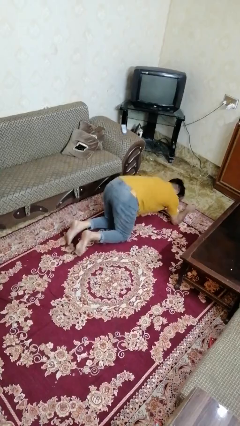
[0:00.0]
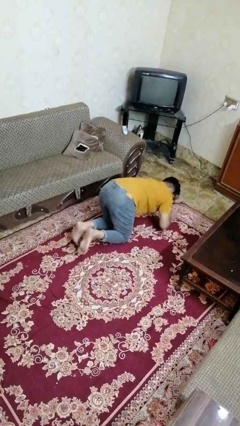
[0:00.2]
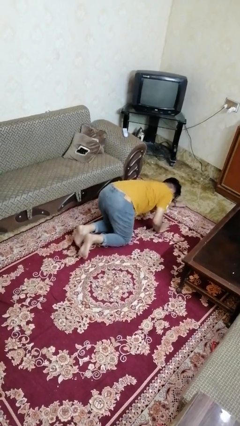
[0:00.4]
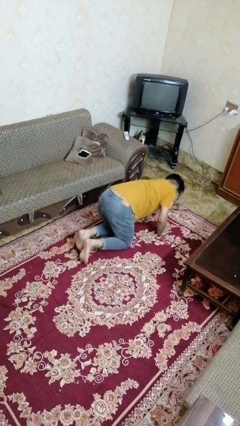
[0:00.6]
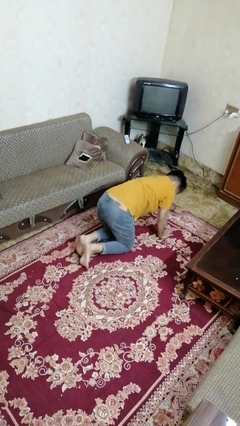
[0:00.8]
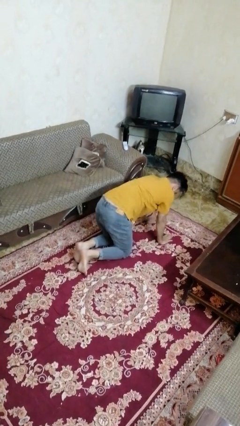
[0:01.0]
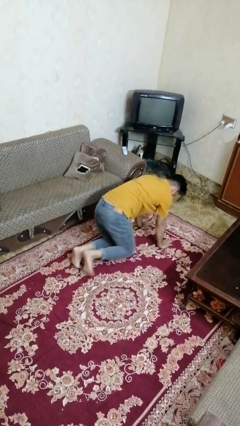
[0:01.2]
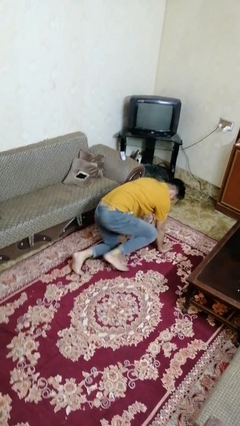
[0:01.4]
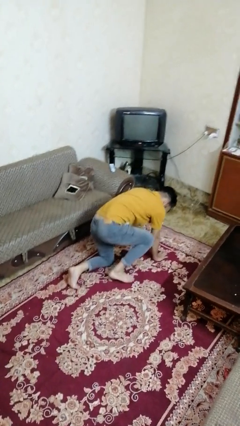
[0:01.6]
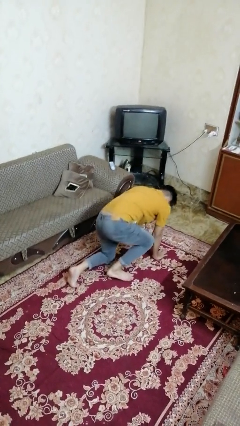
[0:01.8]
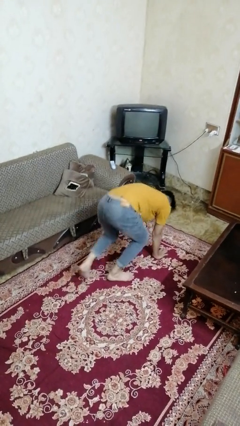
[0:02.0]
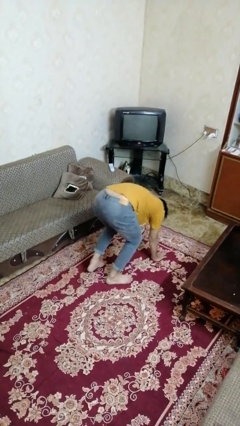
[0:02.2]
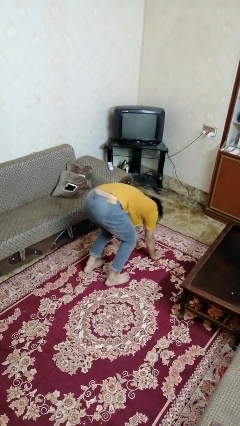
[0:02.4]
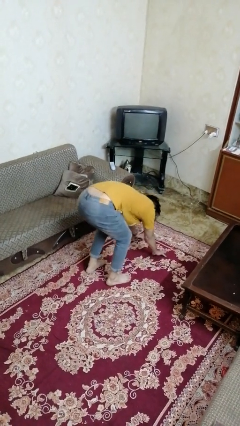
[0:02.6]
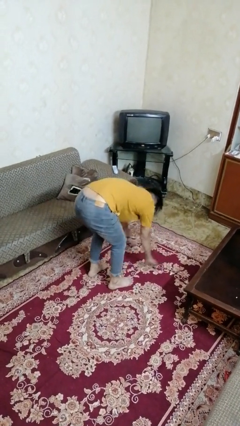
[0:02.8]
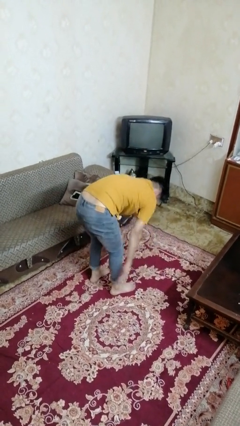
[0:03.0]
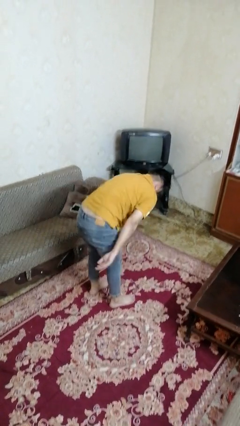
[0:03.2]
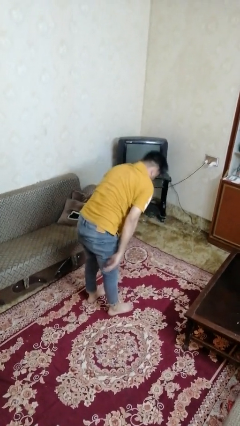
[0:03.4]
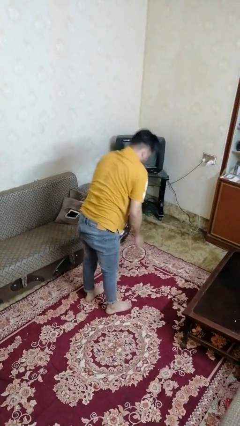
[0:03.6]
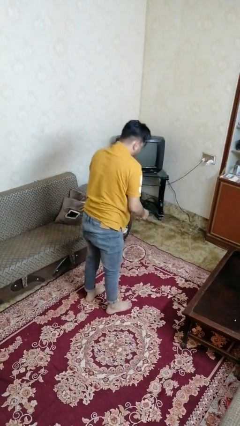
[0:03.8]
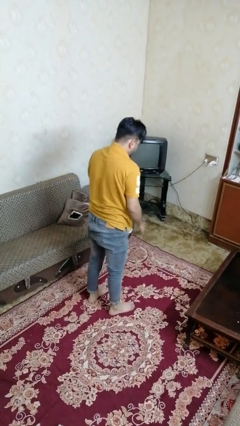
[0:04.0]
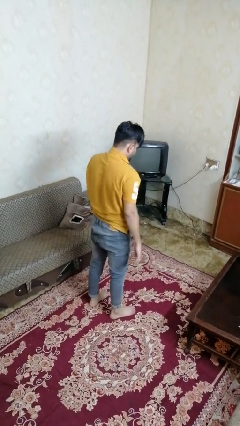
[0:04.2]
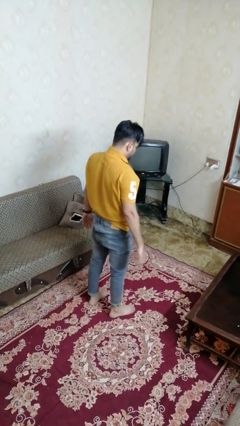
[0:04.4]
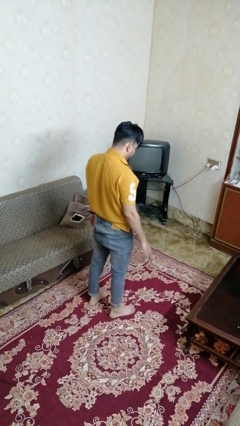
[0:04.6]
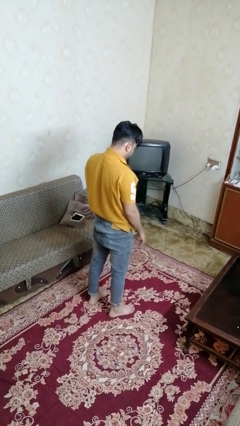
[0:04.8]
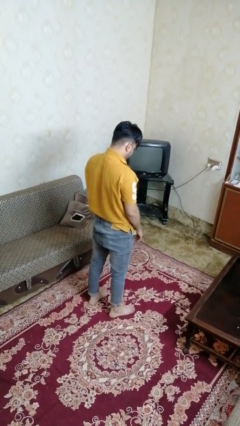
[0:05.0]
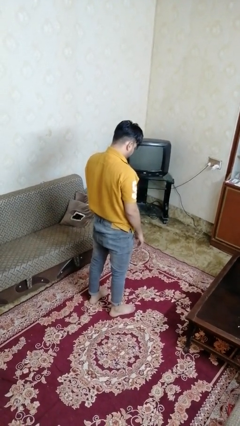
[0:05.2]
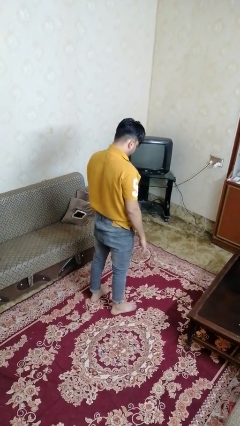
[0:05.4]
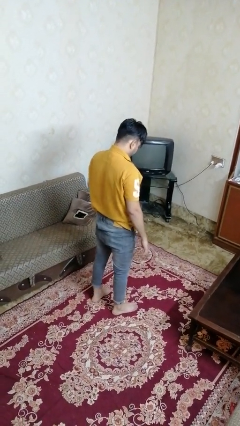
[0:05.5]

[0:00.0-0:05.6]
person stands up from floor

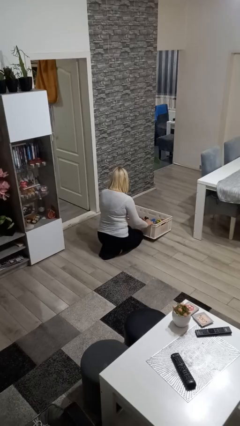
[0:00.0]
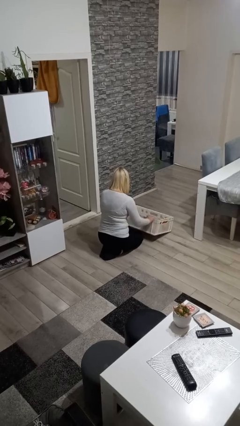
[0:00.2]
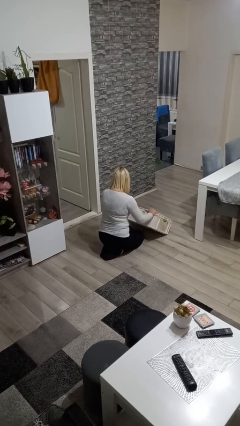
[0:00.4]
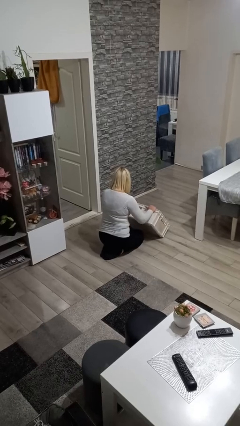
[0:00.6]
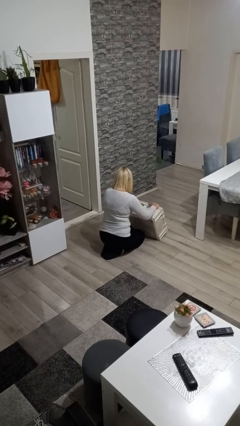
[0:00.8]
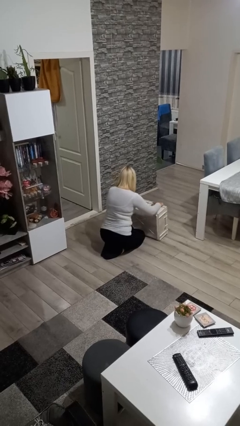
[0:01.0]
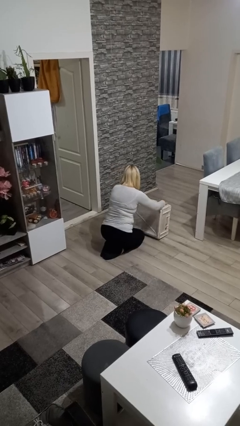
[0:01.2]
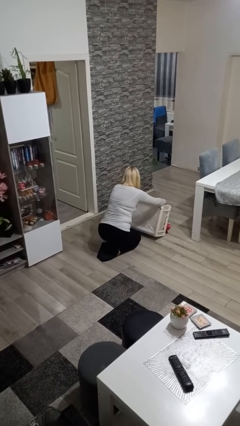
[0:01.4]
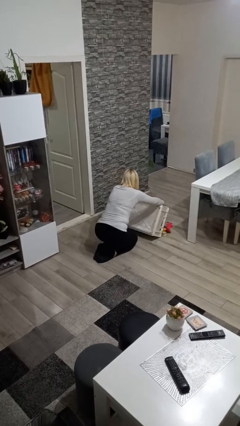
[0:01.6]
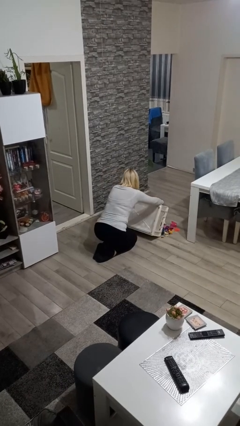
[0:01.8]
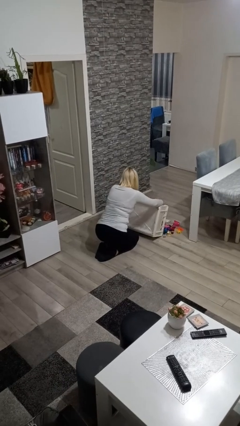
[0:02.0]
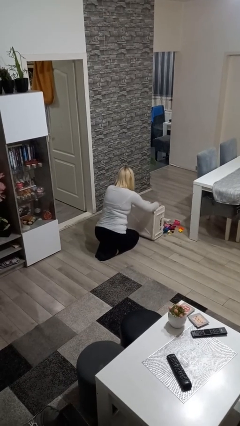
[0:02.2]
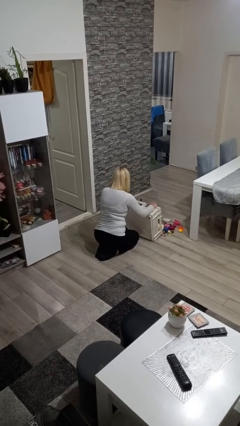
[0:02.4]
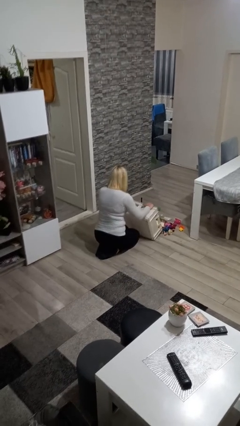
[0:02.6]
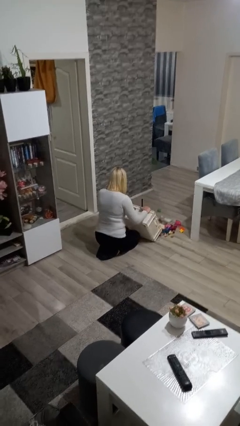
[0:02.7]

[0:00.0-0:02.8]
person unloads box onto floor

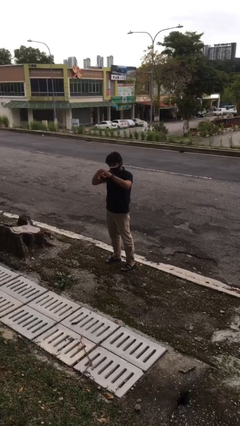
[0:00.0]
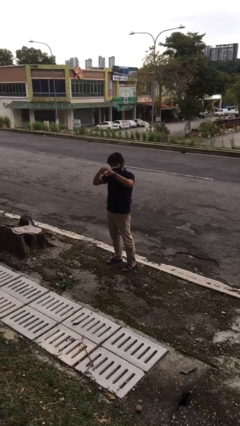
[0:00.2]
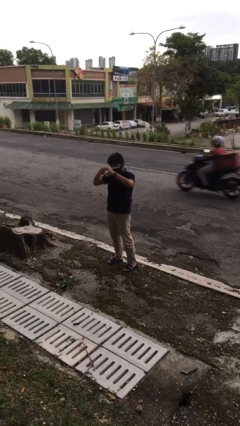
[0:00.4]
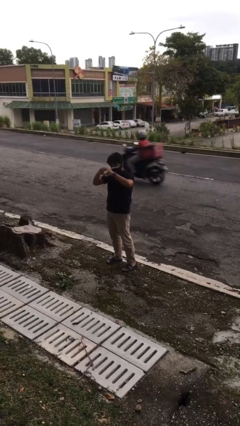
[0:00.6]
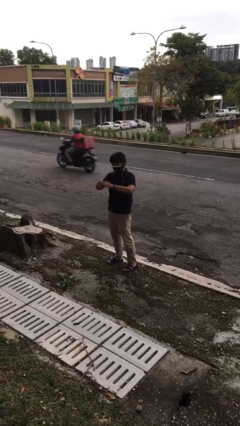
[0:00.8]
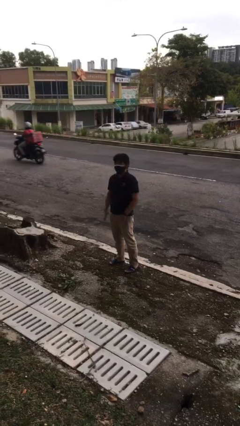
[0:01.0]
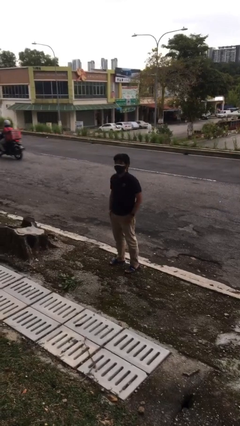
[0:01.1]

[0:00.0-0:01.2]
person gestures heart

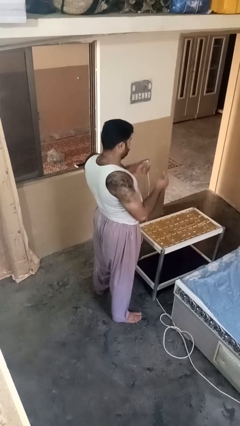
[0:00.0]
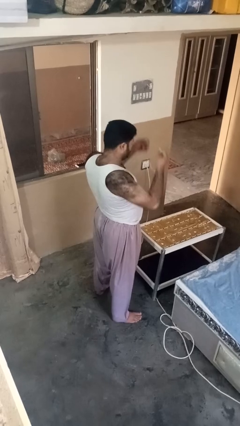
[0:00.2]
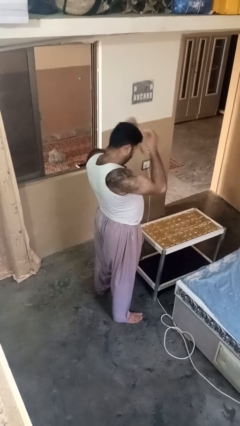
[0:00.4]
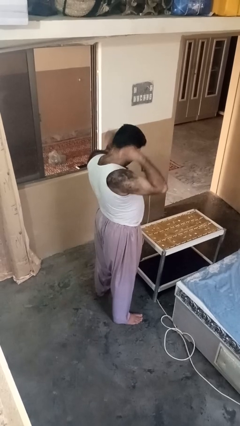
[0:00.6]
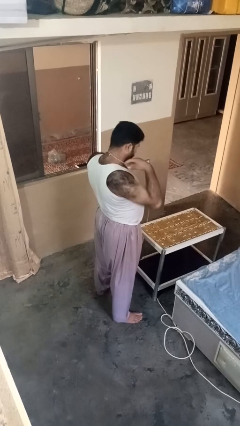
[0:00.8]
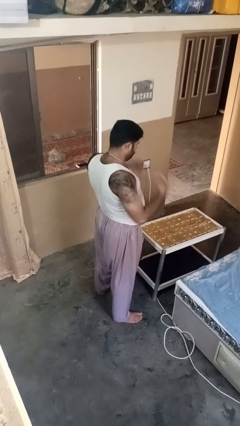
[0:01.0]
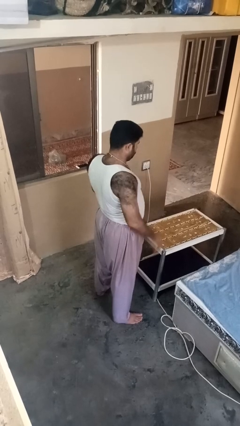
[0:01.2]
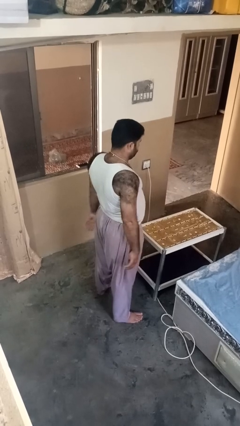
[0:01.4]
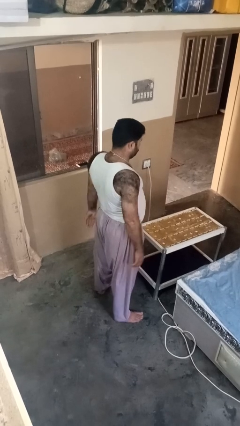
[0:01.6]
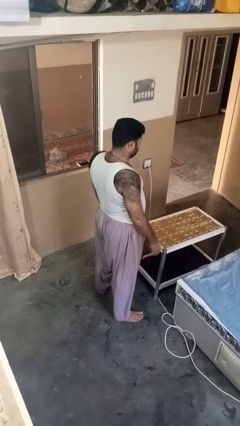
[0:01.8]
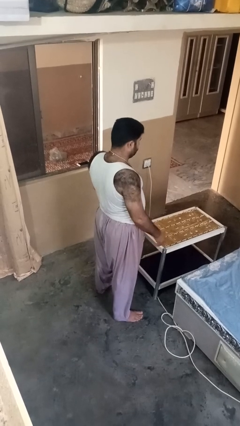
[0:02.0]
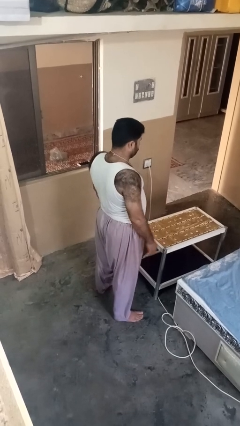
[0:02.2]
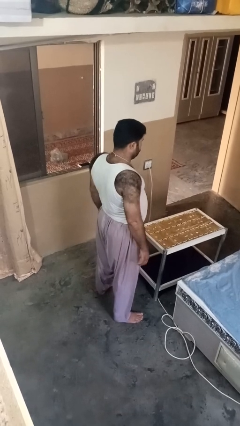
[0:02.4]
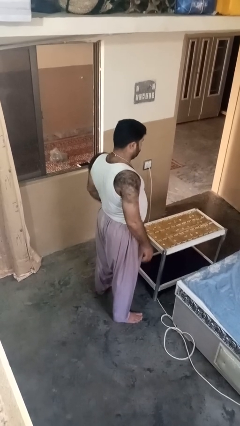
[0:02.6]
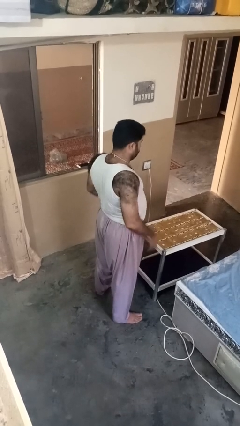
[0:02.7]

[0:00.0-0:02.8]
person puts on necklace

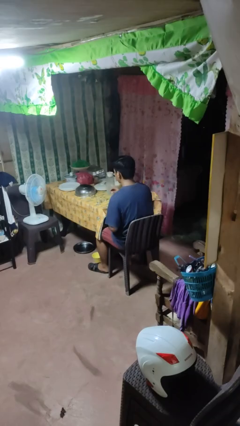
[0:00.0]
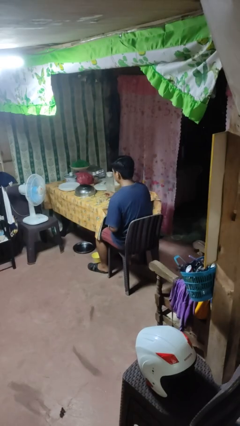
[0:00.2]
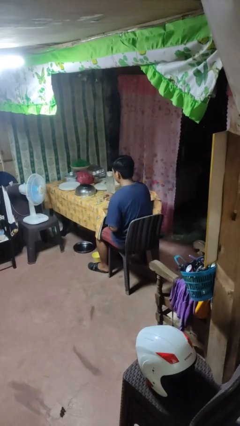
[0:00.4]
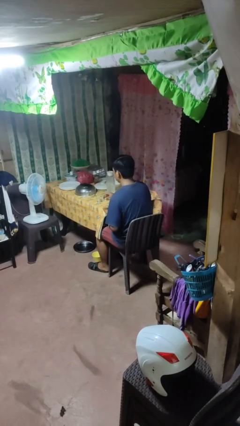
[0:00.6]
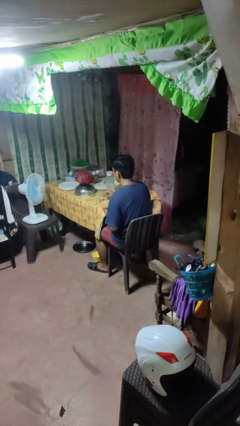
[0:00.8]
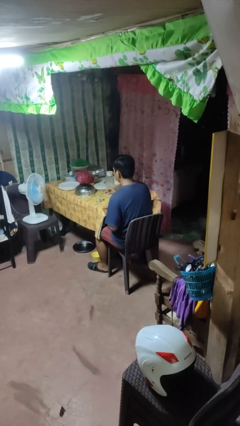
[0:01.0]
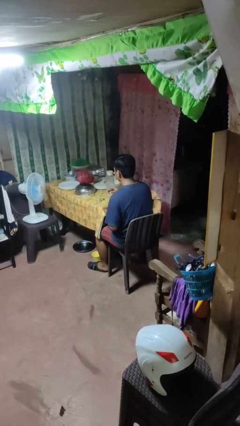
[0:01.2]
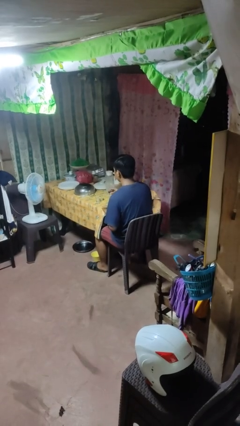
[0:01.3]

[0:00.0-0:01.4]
person picks up object from table

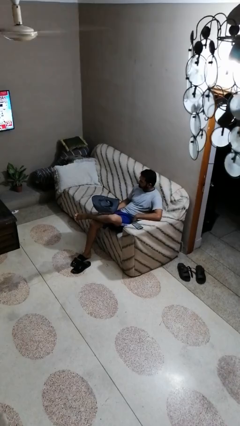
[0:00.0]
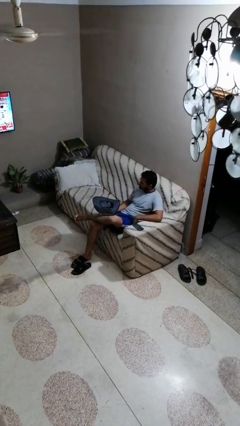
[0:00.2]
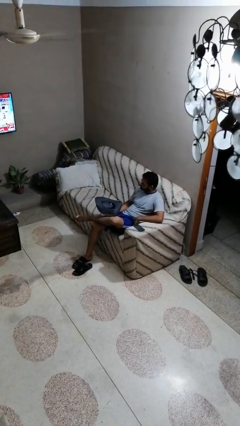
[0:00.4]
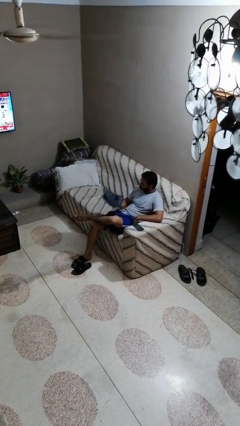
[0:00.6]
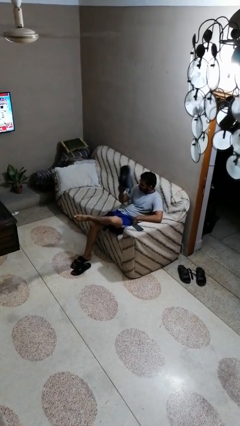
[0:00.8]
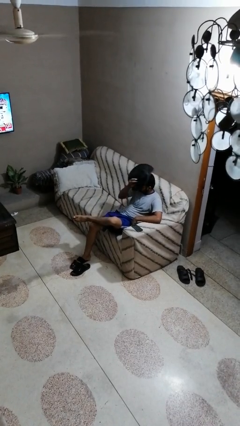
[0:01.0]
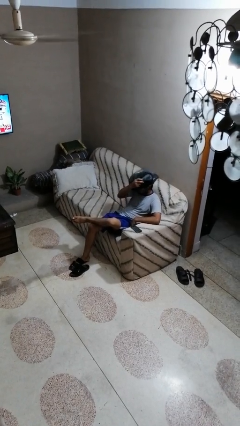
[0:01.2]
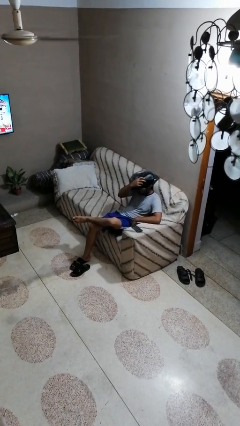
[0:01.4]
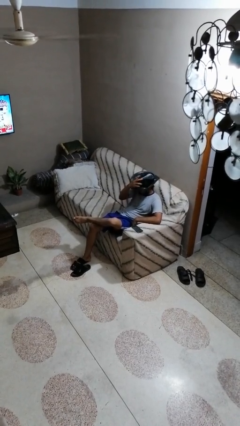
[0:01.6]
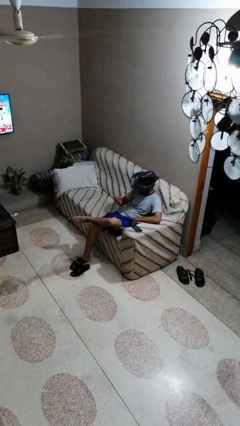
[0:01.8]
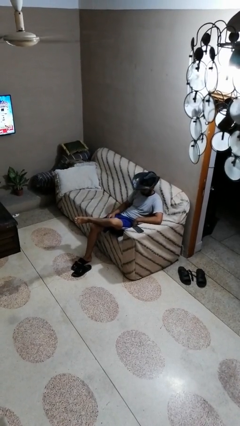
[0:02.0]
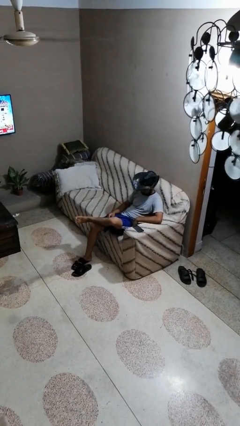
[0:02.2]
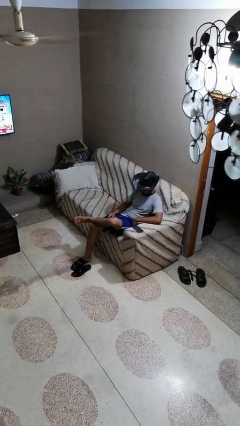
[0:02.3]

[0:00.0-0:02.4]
person puts on hat

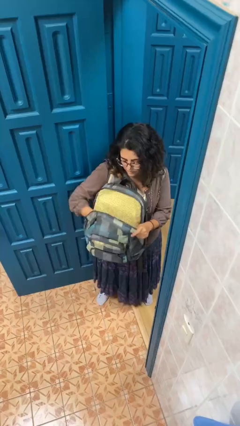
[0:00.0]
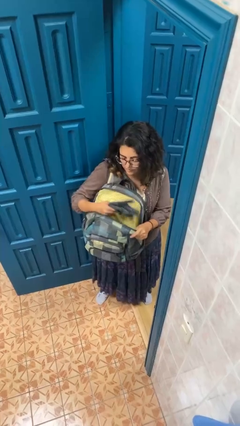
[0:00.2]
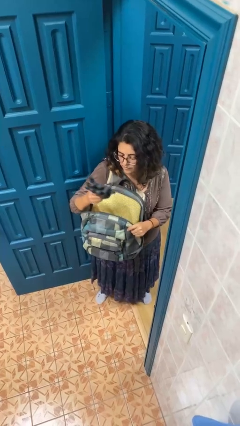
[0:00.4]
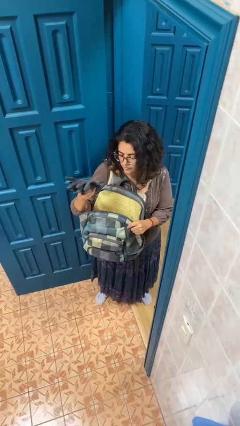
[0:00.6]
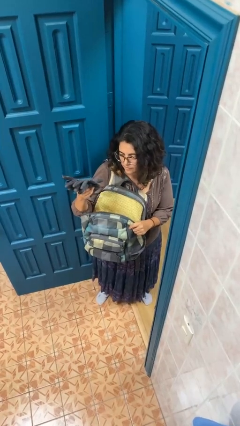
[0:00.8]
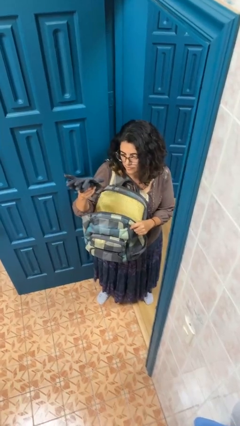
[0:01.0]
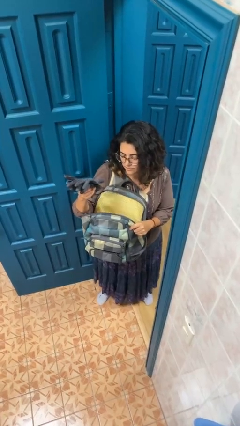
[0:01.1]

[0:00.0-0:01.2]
person takes object from backpack
